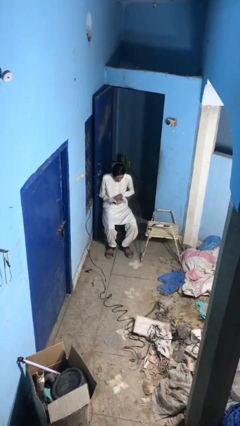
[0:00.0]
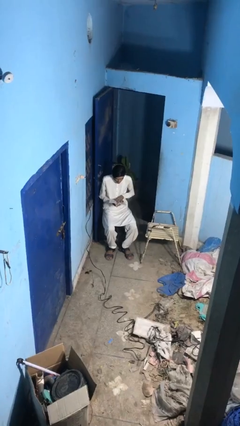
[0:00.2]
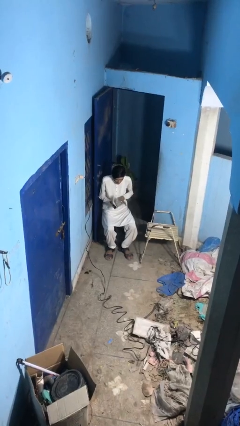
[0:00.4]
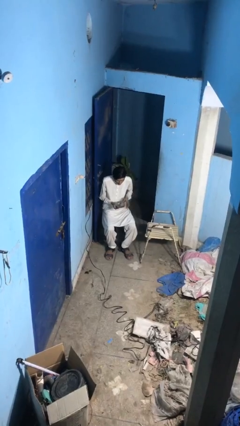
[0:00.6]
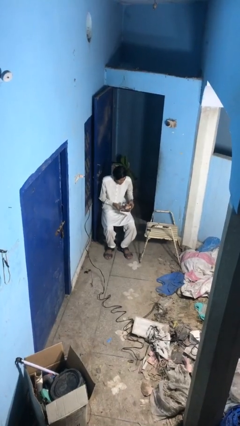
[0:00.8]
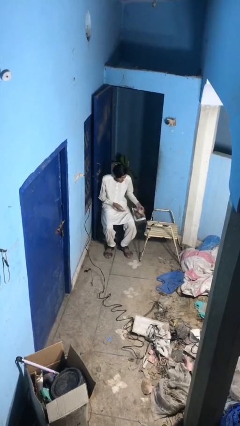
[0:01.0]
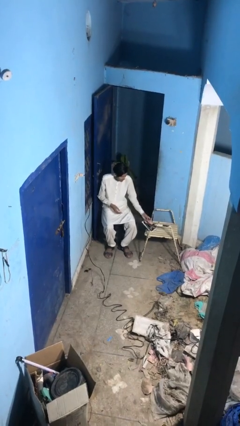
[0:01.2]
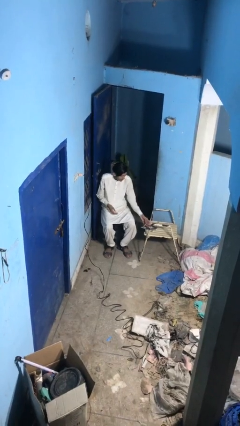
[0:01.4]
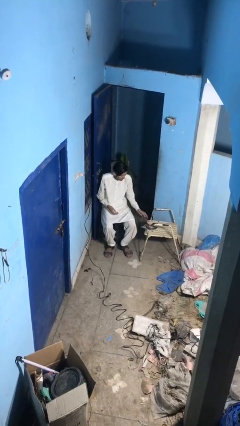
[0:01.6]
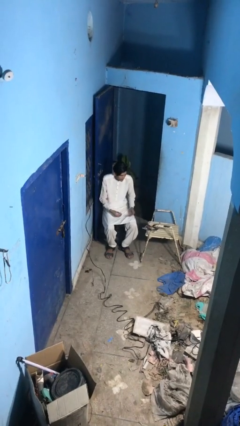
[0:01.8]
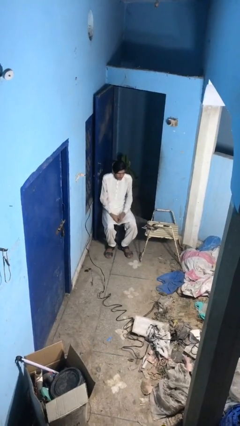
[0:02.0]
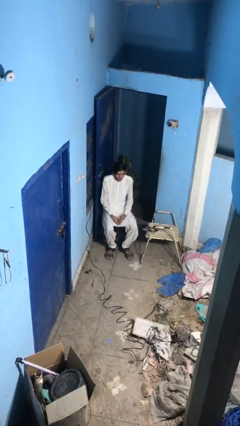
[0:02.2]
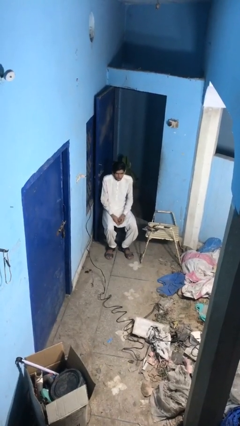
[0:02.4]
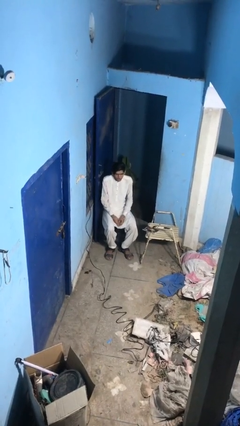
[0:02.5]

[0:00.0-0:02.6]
person puts down object on table

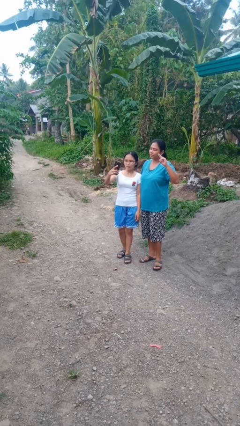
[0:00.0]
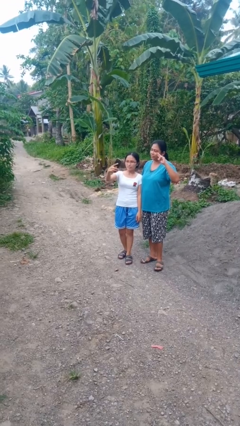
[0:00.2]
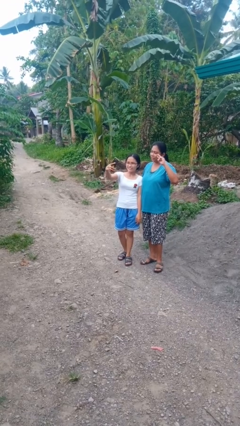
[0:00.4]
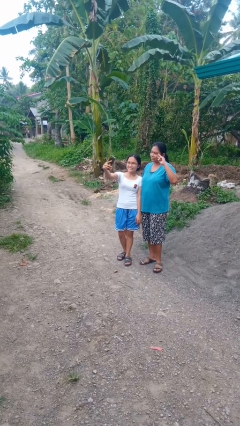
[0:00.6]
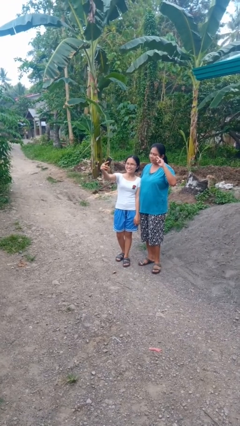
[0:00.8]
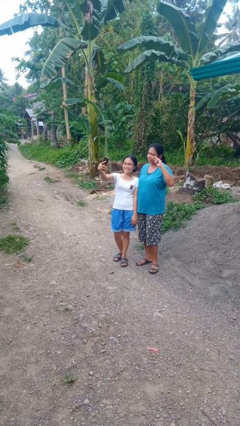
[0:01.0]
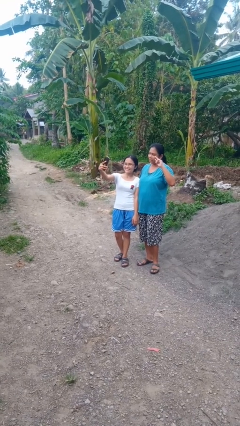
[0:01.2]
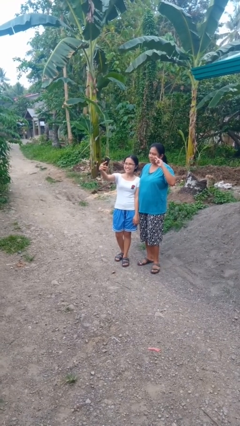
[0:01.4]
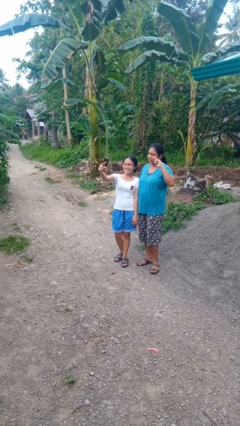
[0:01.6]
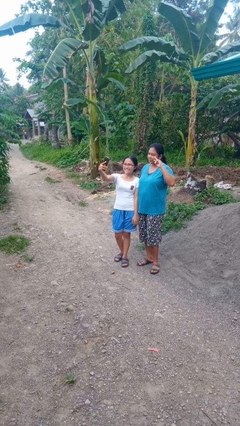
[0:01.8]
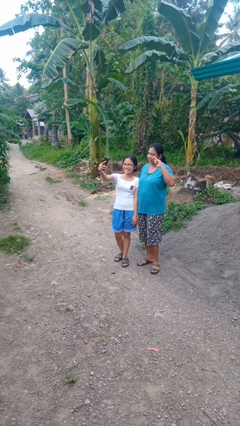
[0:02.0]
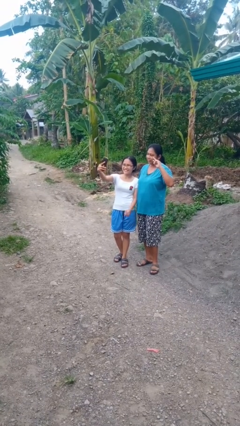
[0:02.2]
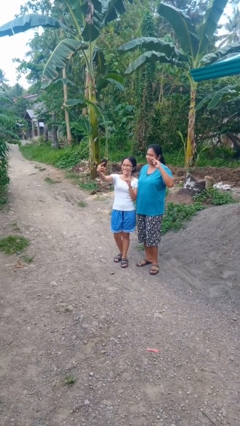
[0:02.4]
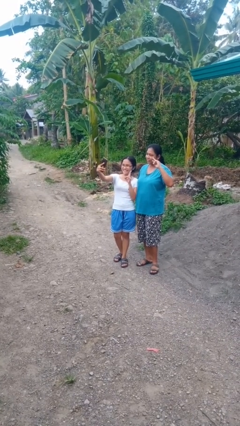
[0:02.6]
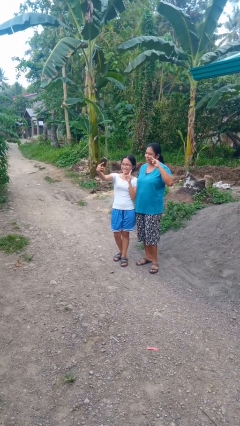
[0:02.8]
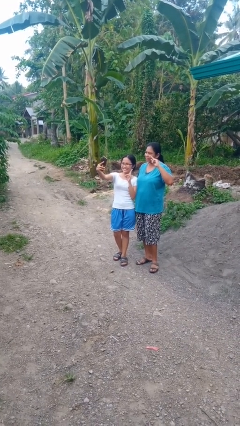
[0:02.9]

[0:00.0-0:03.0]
person takes selfie with person

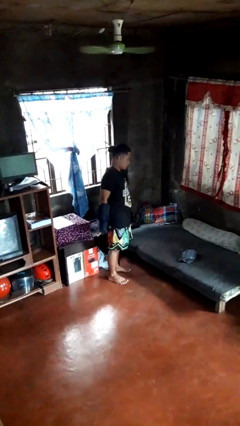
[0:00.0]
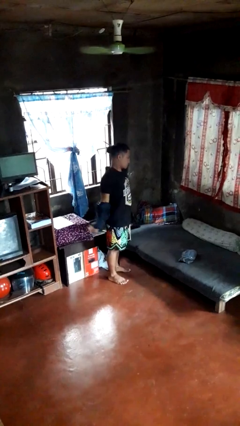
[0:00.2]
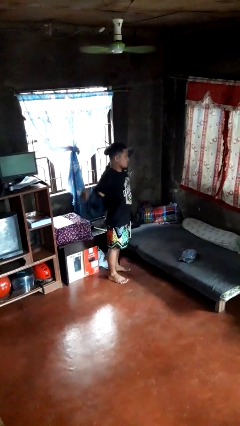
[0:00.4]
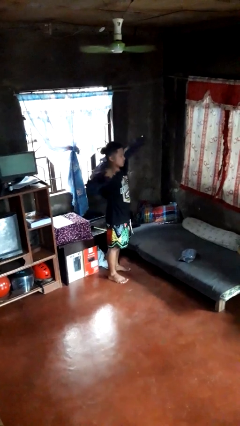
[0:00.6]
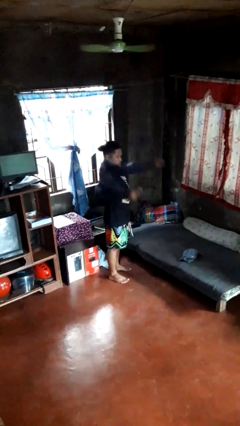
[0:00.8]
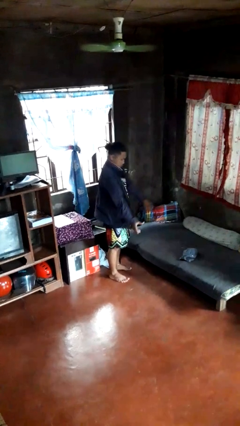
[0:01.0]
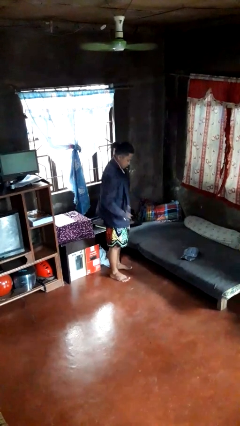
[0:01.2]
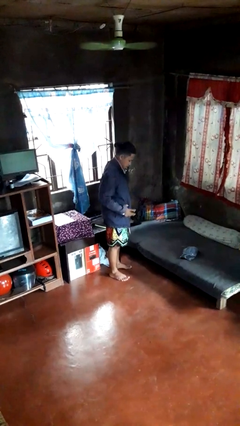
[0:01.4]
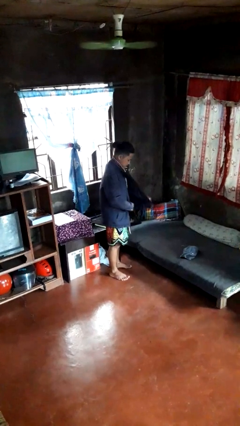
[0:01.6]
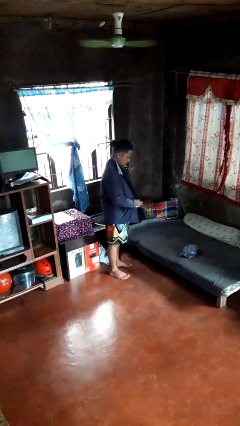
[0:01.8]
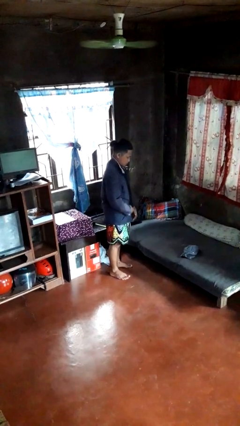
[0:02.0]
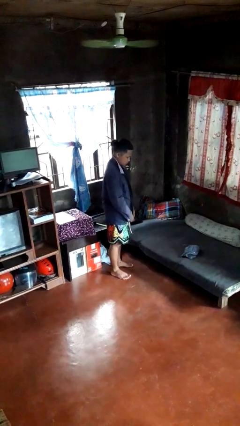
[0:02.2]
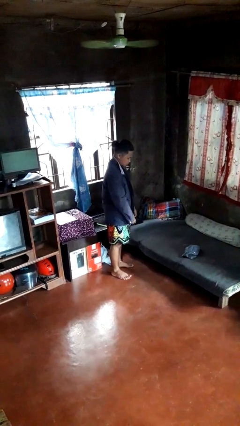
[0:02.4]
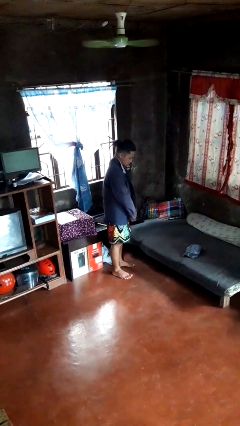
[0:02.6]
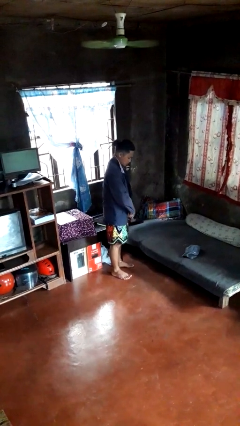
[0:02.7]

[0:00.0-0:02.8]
person puts on jacket

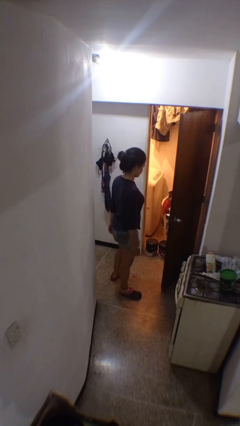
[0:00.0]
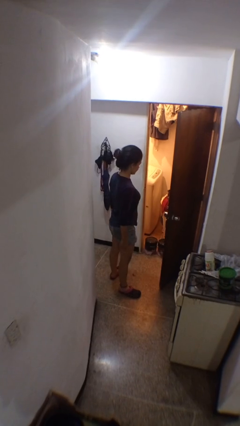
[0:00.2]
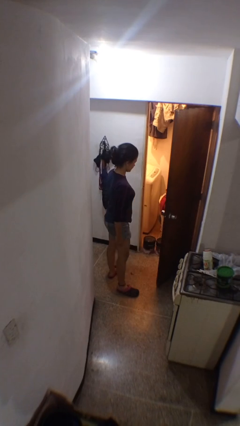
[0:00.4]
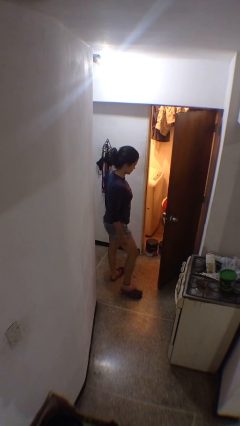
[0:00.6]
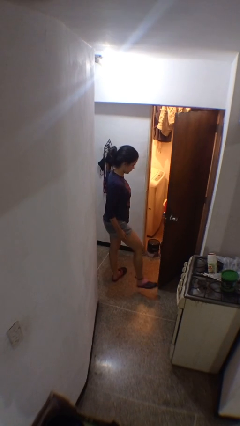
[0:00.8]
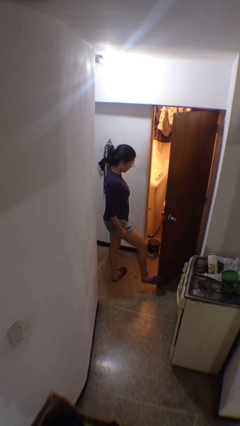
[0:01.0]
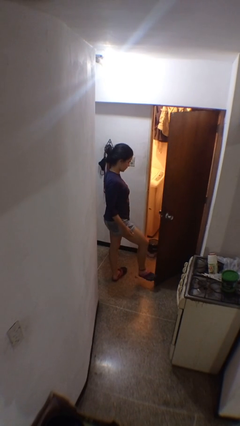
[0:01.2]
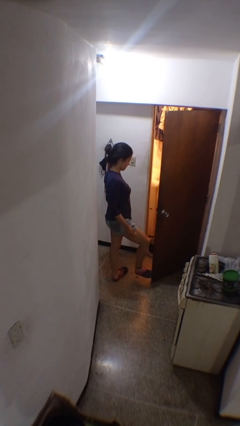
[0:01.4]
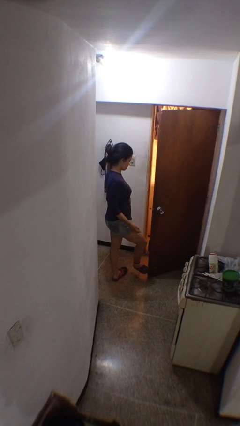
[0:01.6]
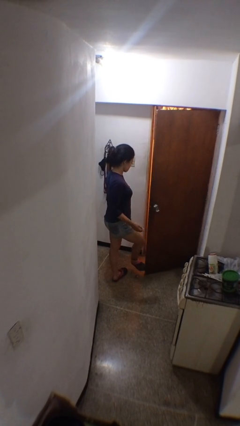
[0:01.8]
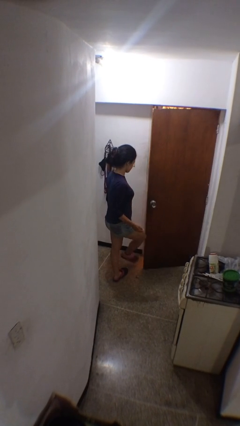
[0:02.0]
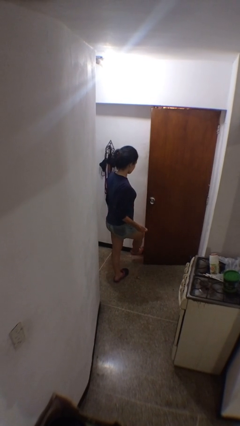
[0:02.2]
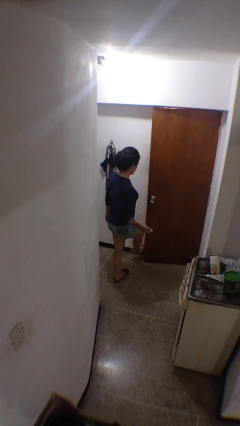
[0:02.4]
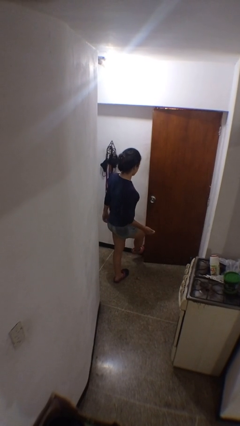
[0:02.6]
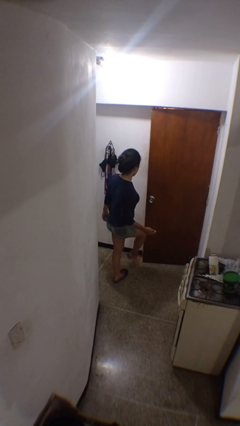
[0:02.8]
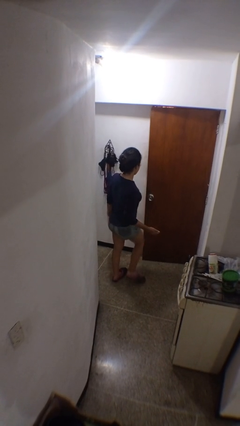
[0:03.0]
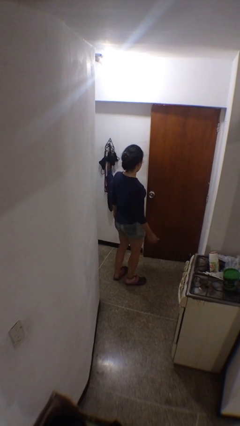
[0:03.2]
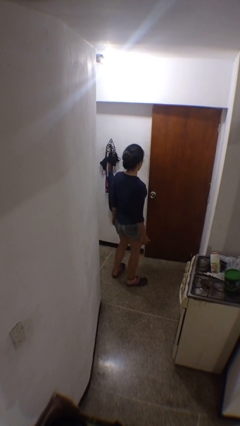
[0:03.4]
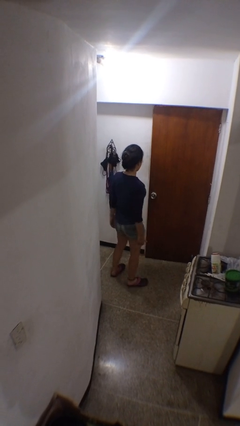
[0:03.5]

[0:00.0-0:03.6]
person closes door with foot

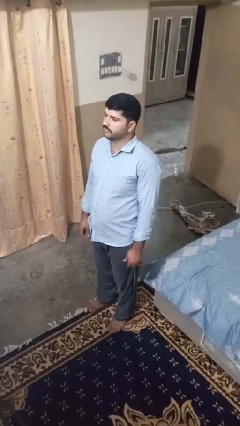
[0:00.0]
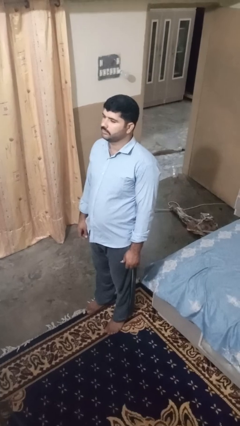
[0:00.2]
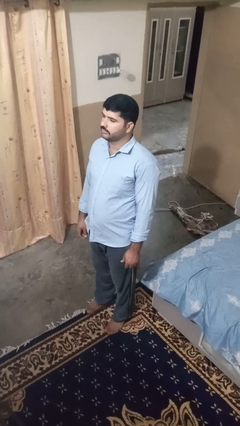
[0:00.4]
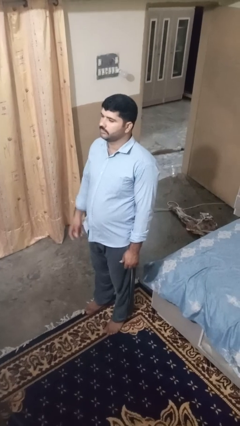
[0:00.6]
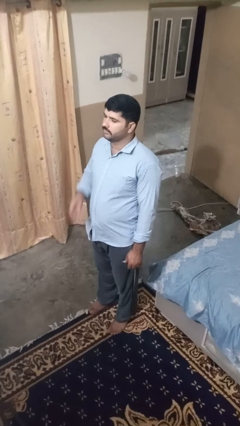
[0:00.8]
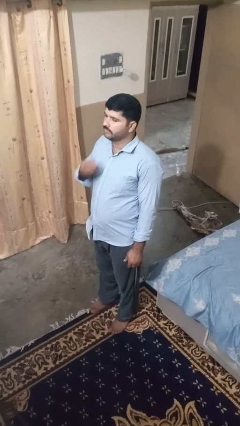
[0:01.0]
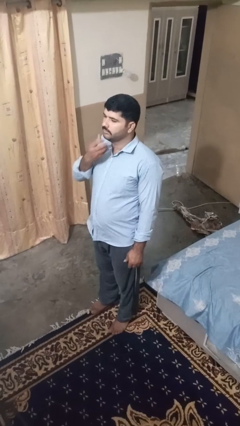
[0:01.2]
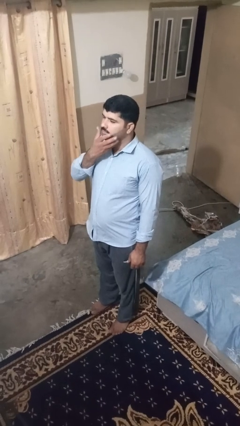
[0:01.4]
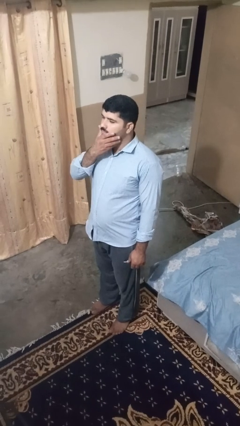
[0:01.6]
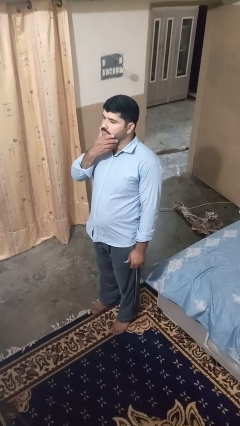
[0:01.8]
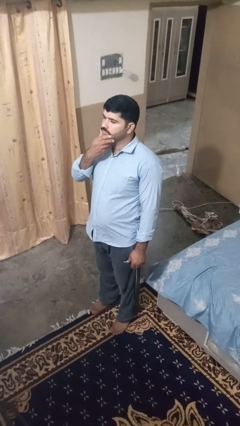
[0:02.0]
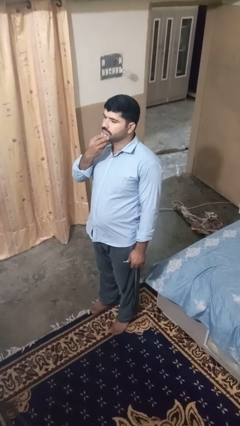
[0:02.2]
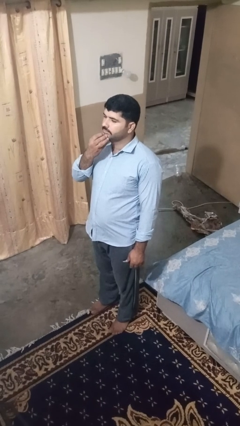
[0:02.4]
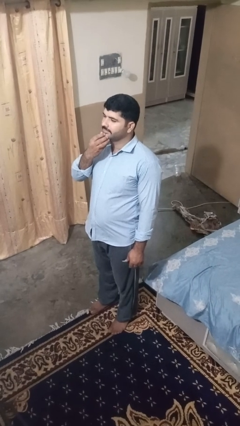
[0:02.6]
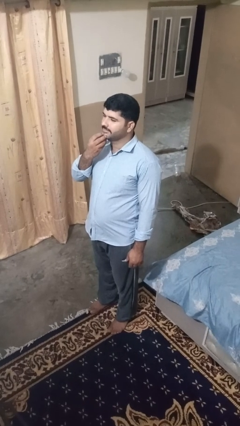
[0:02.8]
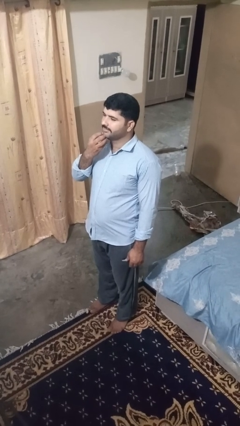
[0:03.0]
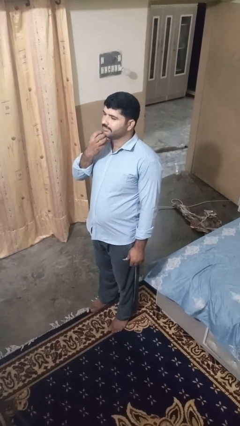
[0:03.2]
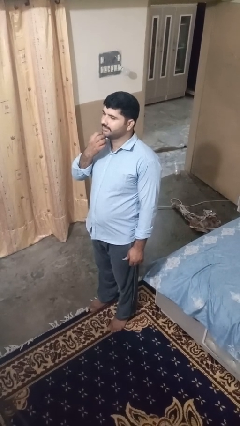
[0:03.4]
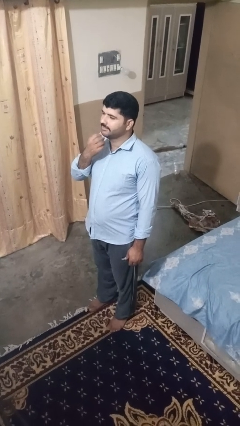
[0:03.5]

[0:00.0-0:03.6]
person strokes chin

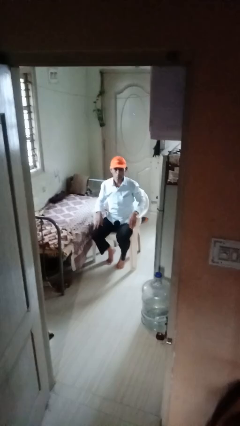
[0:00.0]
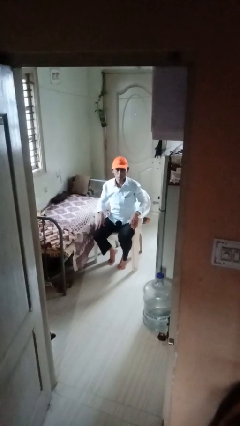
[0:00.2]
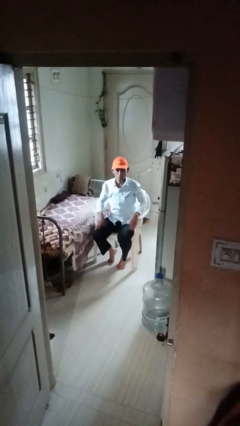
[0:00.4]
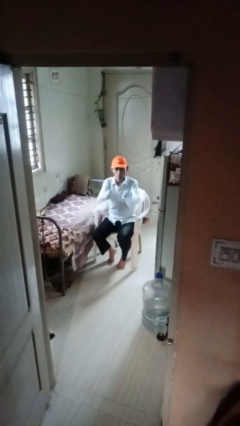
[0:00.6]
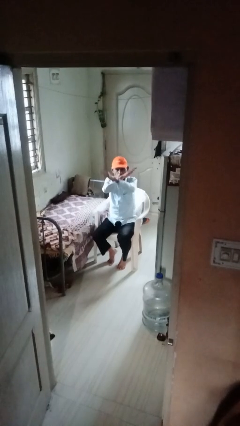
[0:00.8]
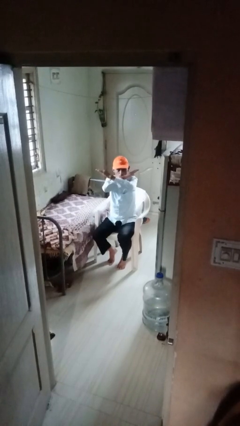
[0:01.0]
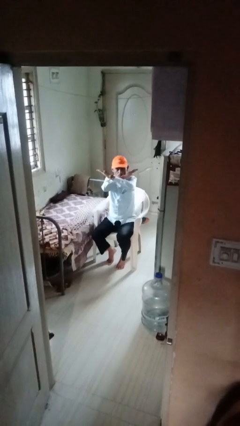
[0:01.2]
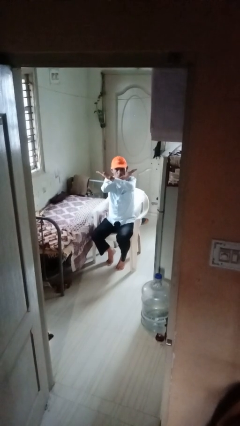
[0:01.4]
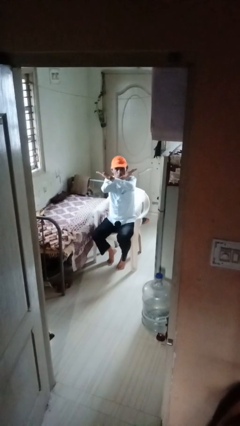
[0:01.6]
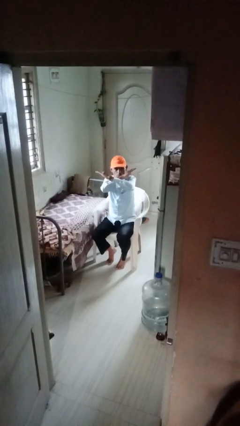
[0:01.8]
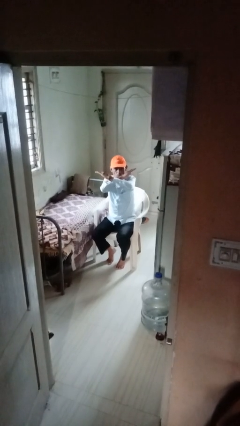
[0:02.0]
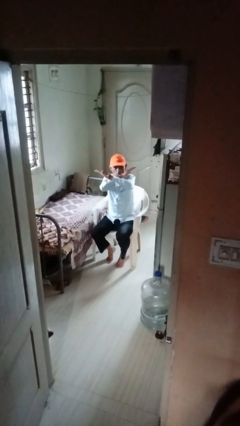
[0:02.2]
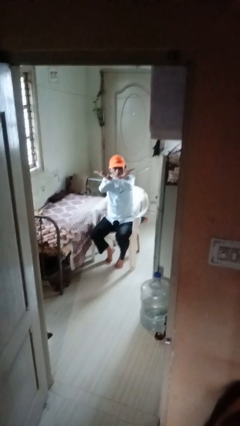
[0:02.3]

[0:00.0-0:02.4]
person gestures arms x
